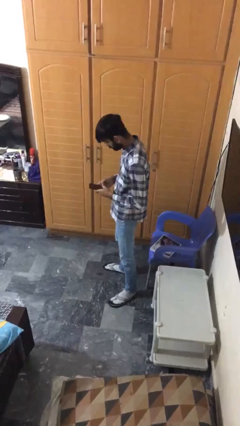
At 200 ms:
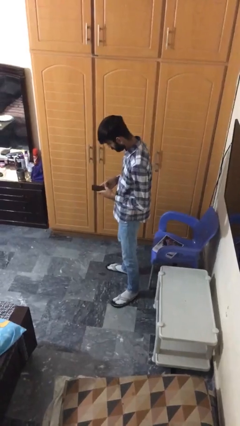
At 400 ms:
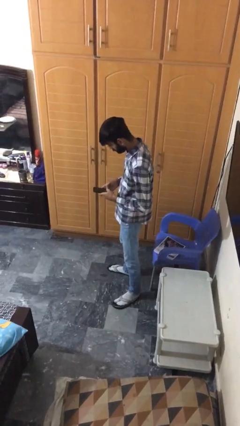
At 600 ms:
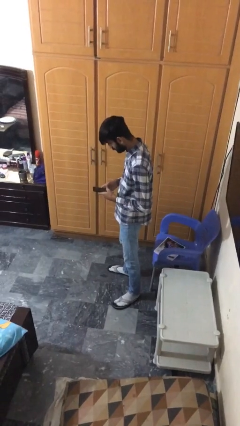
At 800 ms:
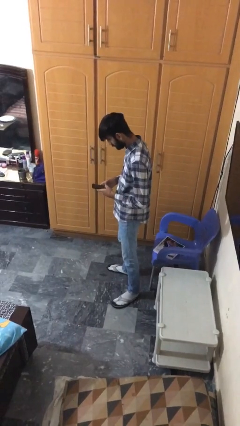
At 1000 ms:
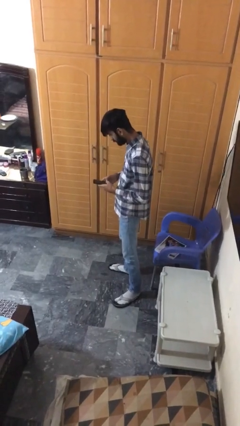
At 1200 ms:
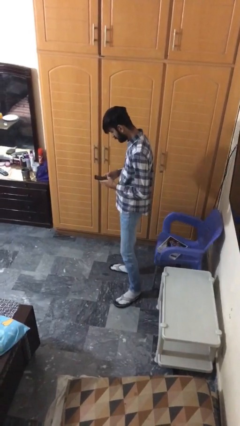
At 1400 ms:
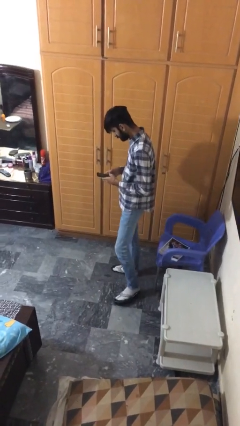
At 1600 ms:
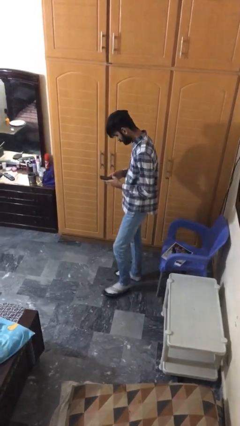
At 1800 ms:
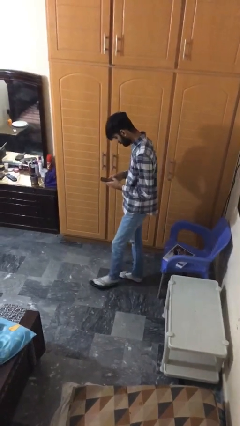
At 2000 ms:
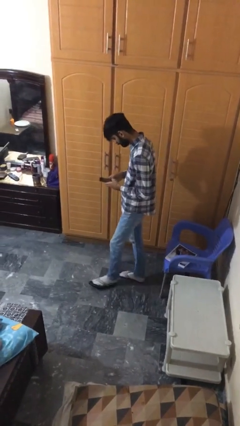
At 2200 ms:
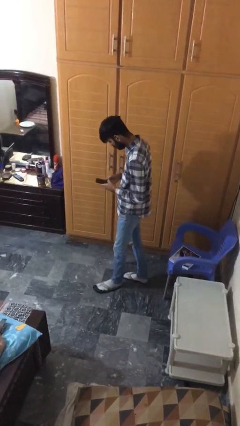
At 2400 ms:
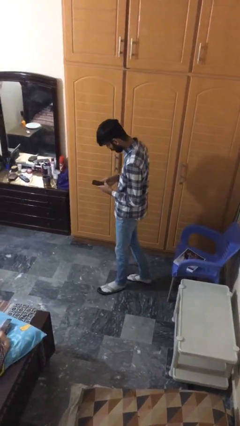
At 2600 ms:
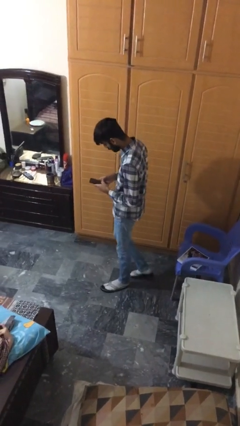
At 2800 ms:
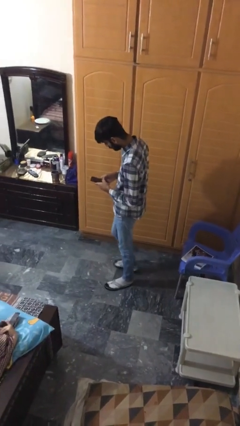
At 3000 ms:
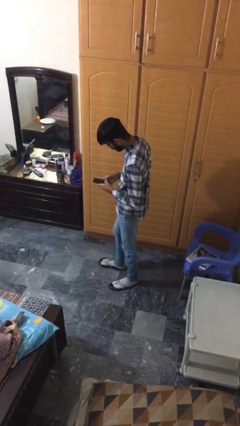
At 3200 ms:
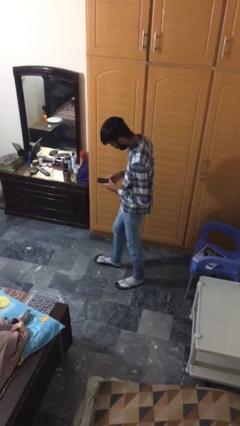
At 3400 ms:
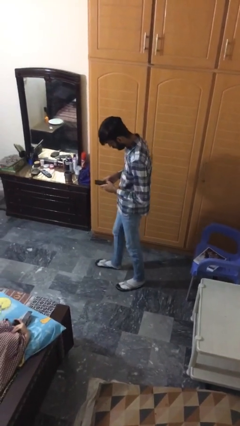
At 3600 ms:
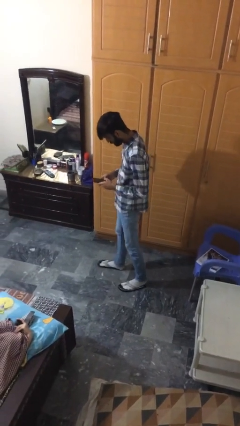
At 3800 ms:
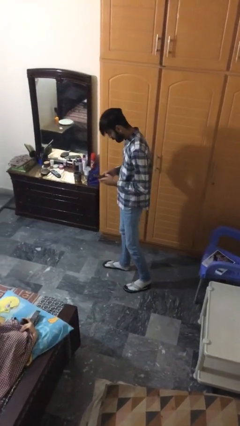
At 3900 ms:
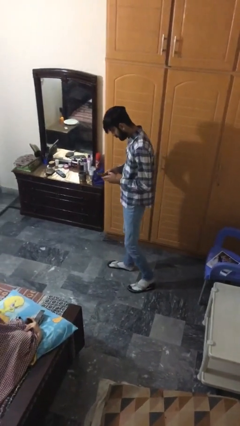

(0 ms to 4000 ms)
person texts on phone

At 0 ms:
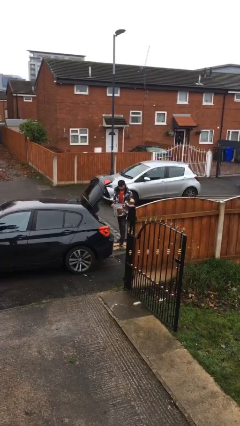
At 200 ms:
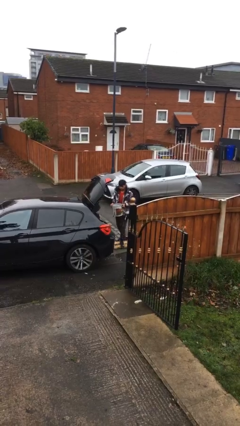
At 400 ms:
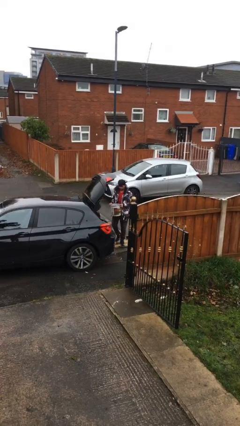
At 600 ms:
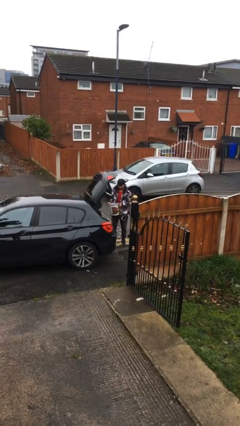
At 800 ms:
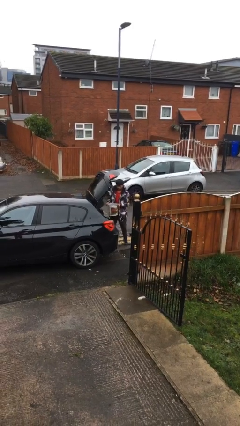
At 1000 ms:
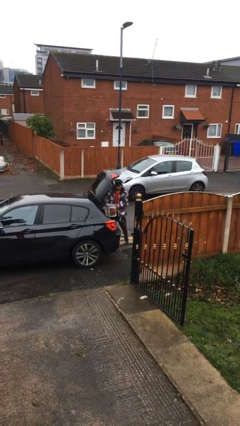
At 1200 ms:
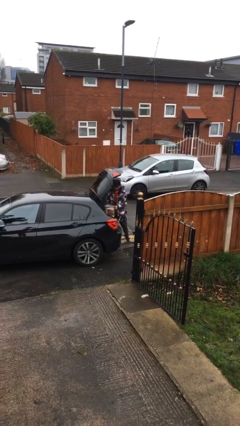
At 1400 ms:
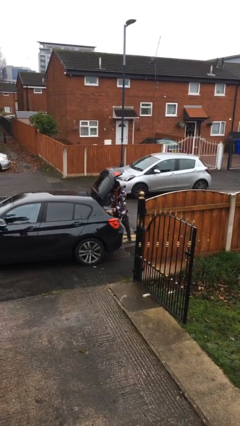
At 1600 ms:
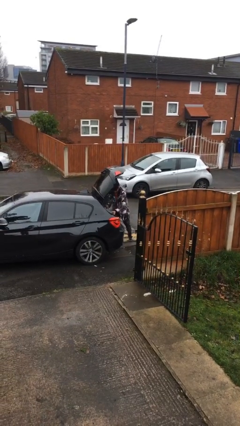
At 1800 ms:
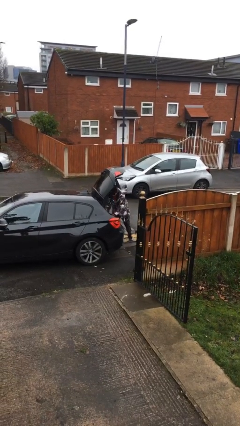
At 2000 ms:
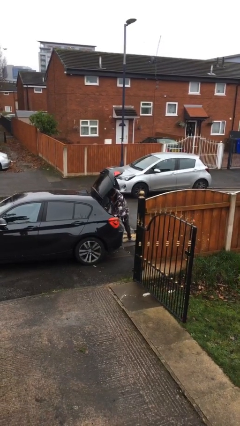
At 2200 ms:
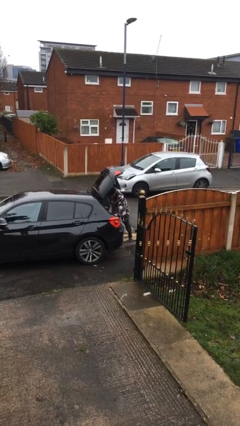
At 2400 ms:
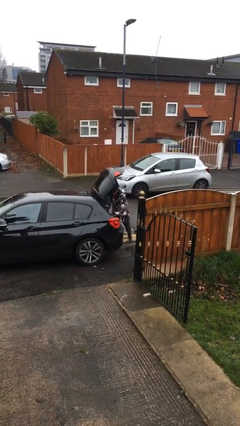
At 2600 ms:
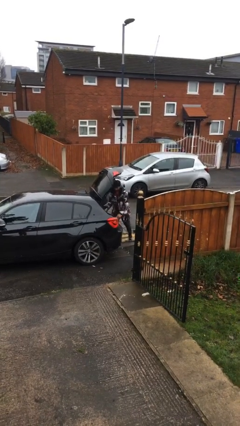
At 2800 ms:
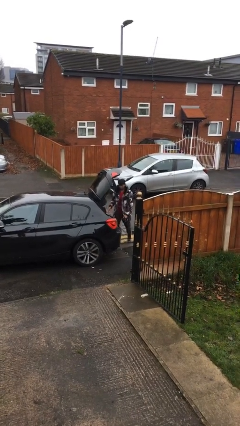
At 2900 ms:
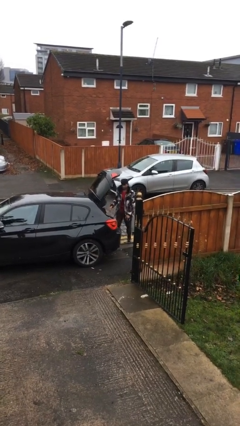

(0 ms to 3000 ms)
person loads car

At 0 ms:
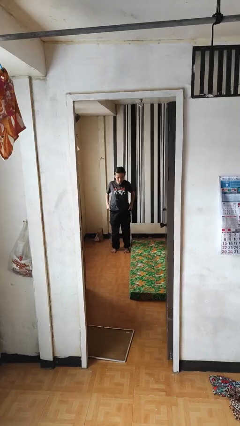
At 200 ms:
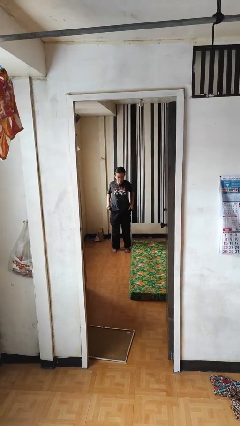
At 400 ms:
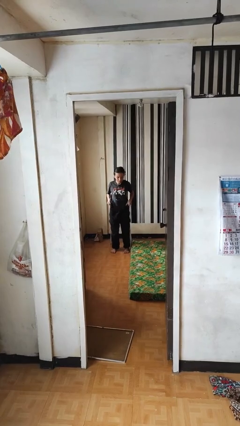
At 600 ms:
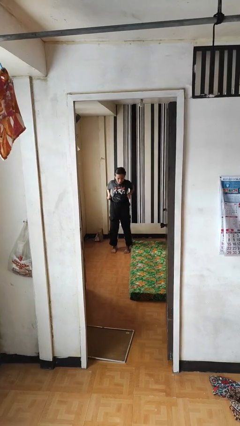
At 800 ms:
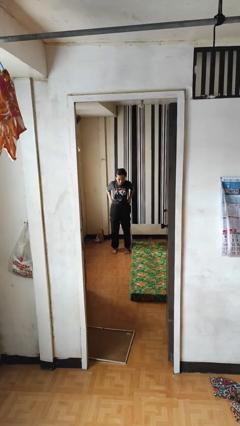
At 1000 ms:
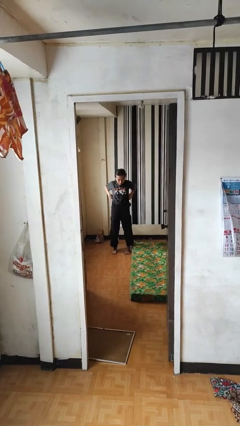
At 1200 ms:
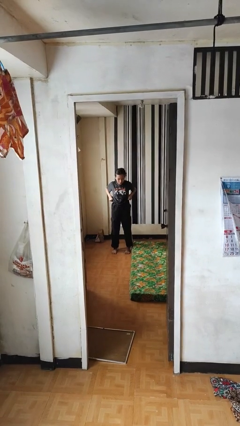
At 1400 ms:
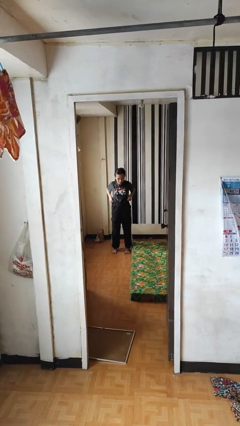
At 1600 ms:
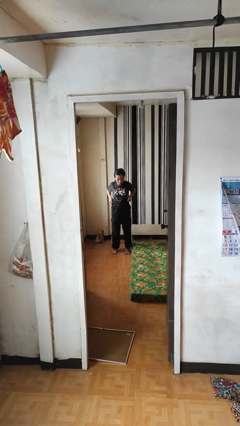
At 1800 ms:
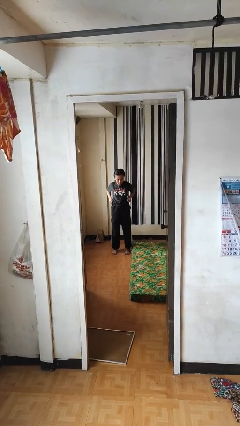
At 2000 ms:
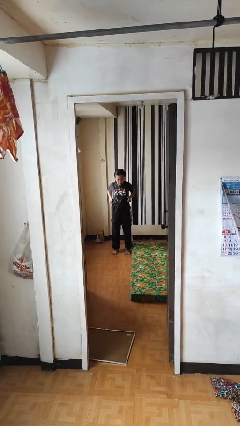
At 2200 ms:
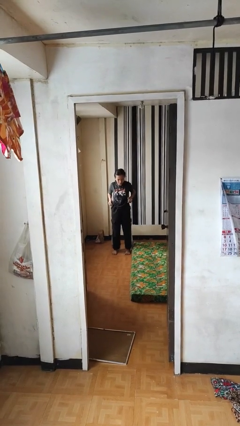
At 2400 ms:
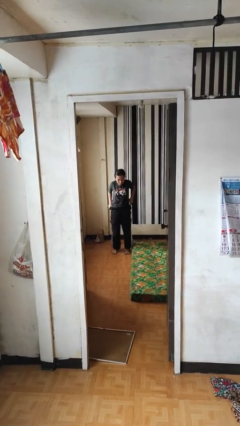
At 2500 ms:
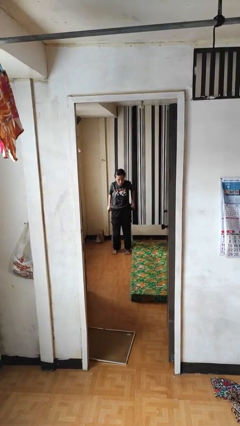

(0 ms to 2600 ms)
person hikes up pants

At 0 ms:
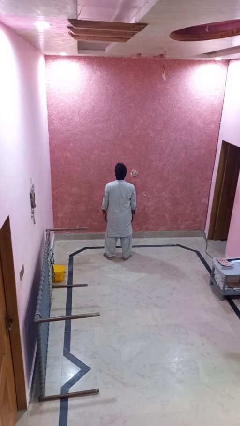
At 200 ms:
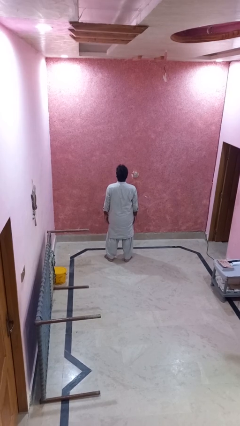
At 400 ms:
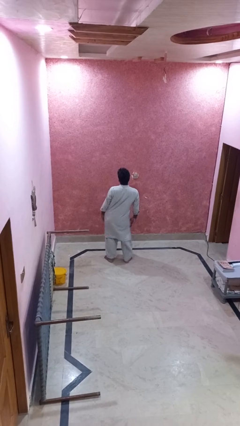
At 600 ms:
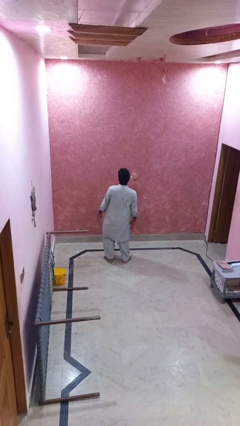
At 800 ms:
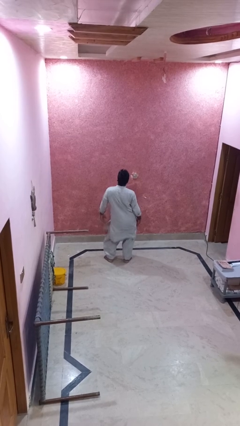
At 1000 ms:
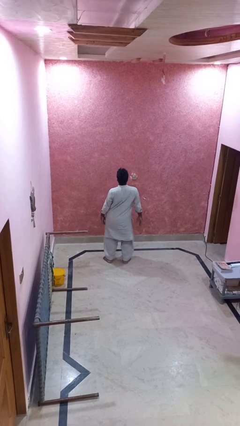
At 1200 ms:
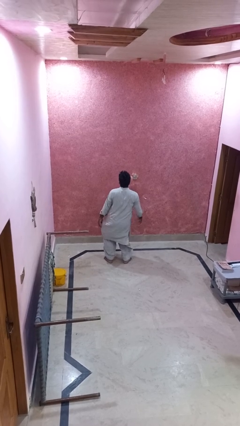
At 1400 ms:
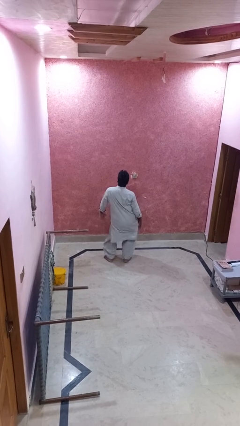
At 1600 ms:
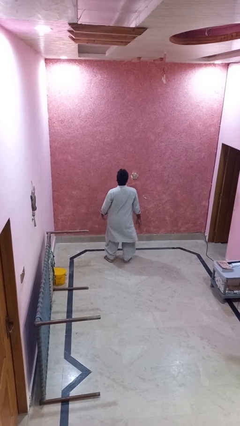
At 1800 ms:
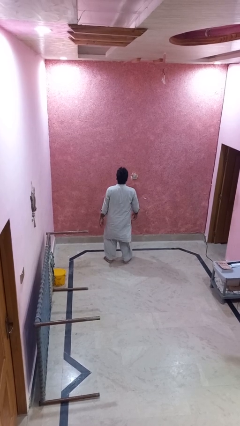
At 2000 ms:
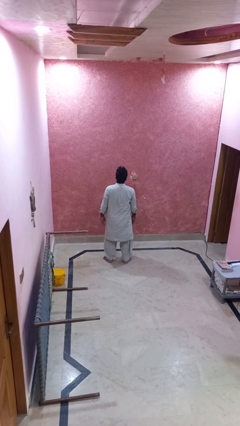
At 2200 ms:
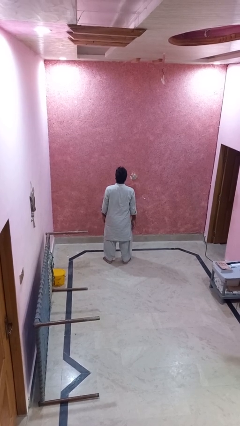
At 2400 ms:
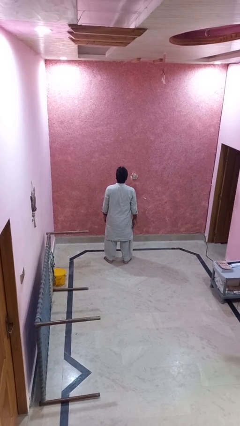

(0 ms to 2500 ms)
person wiggles hips

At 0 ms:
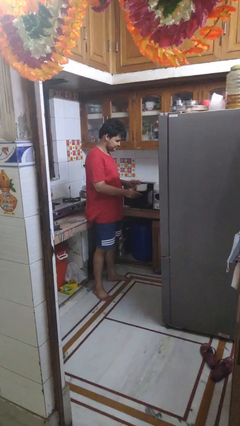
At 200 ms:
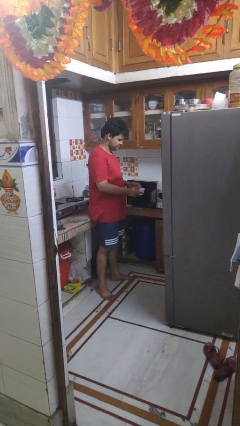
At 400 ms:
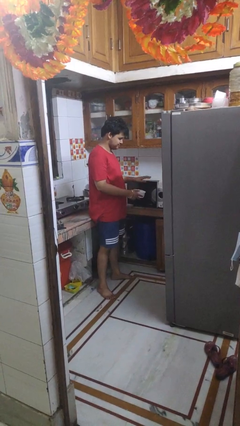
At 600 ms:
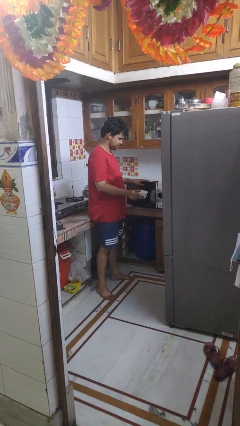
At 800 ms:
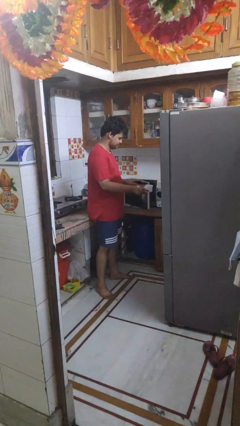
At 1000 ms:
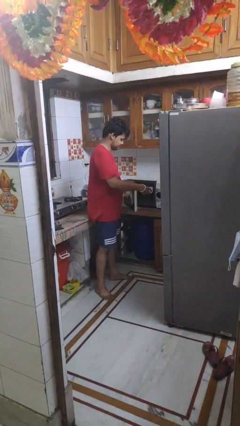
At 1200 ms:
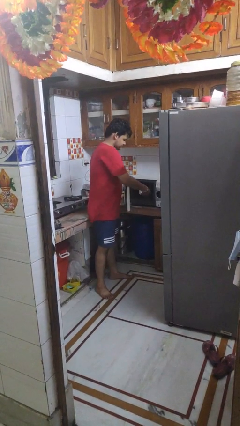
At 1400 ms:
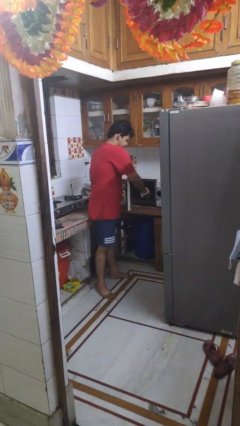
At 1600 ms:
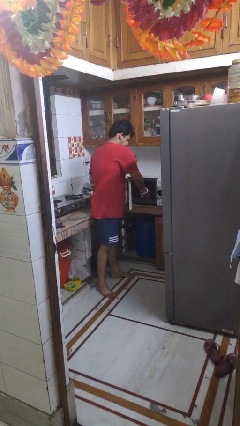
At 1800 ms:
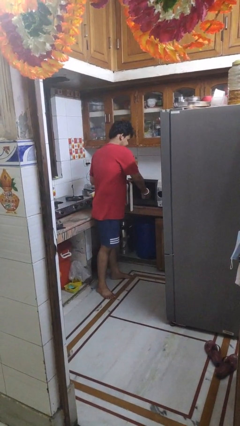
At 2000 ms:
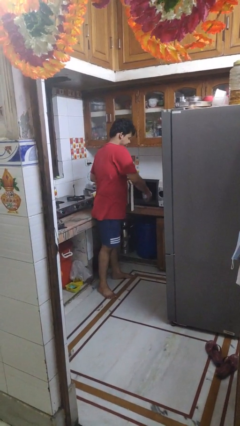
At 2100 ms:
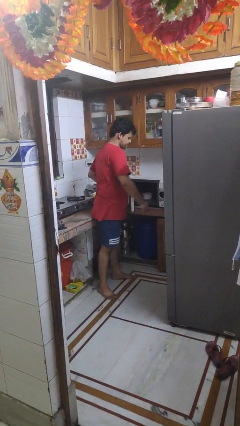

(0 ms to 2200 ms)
person puts object into microwave

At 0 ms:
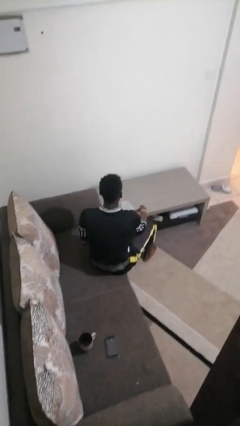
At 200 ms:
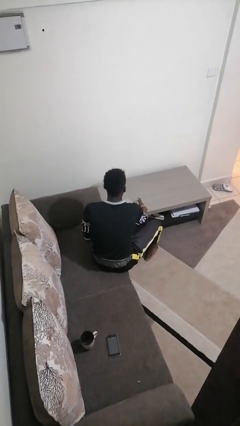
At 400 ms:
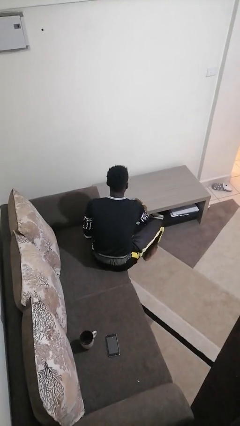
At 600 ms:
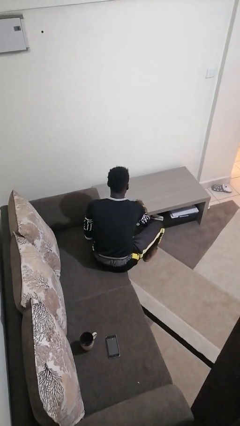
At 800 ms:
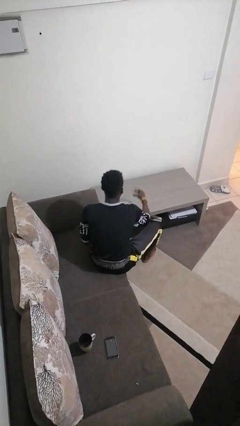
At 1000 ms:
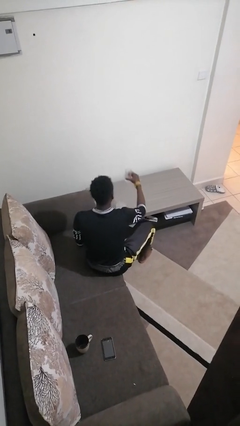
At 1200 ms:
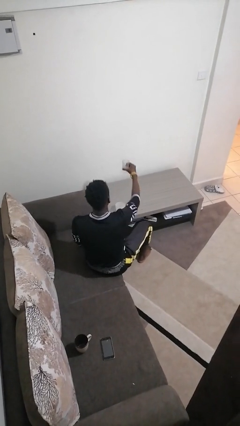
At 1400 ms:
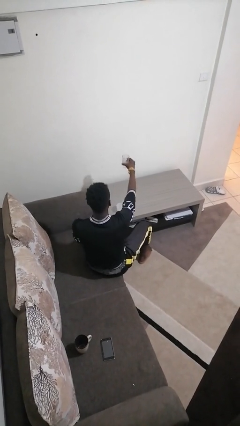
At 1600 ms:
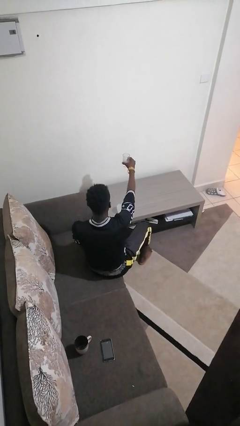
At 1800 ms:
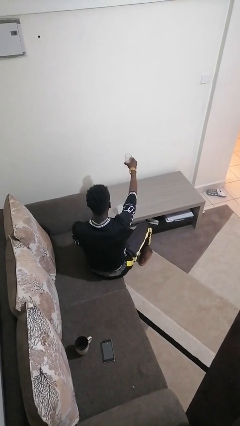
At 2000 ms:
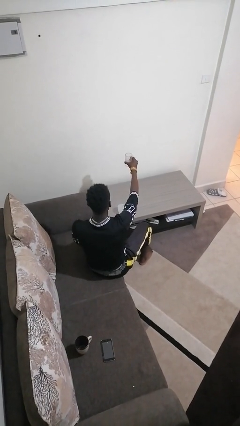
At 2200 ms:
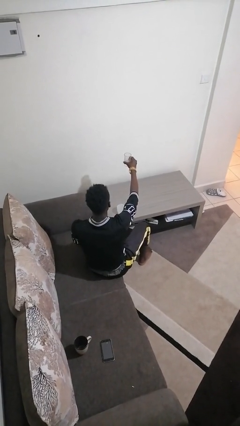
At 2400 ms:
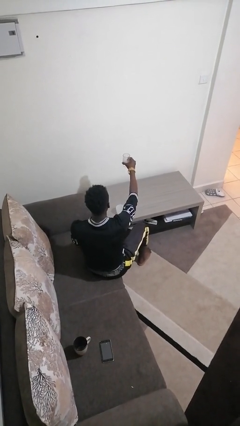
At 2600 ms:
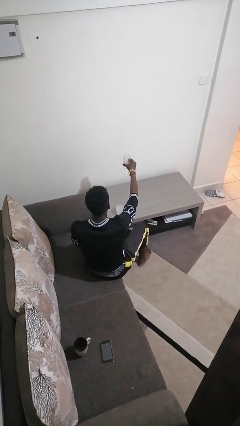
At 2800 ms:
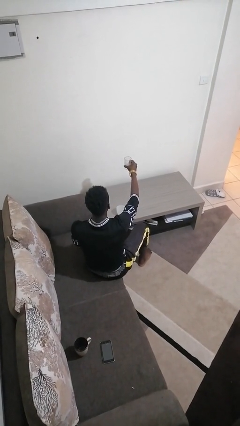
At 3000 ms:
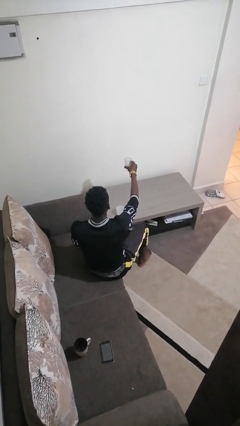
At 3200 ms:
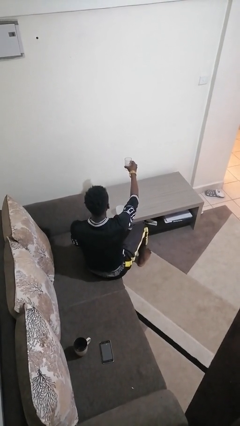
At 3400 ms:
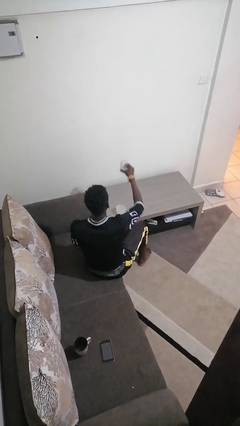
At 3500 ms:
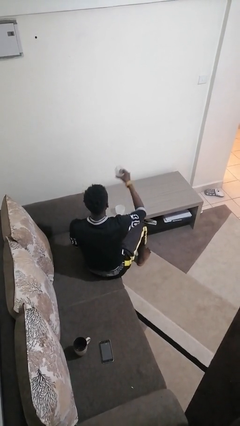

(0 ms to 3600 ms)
person picks up object from table
